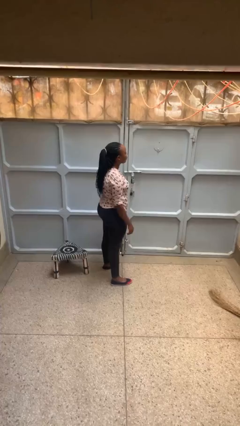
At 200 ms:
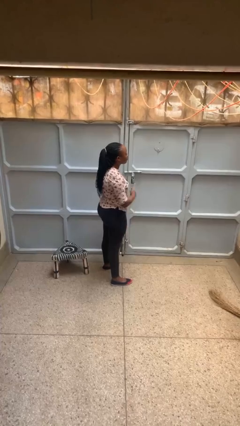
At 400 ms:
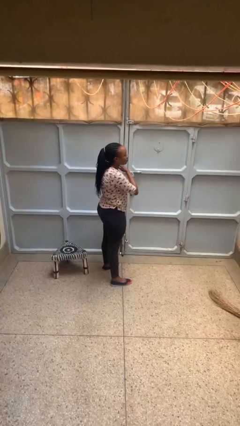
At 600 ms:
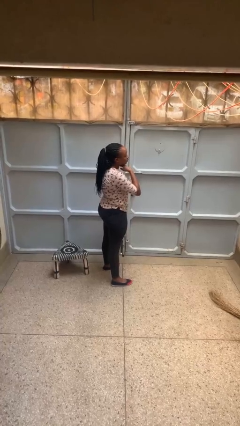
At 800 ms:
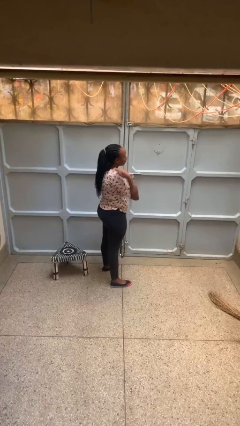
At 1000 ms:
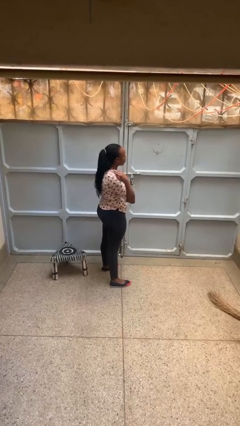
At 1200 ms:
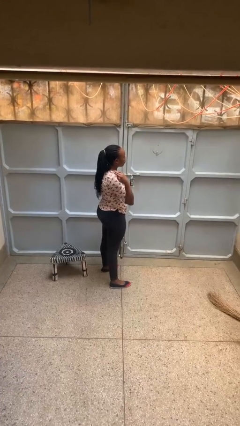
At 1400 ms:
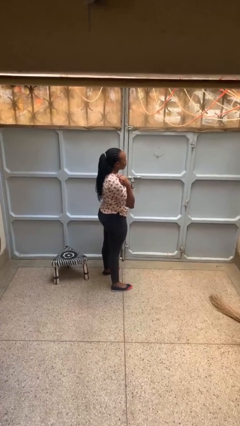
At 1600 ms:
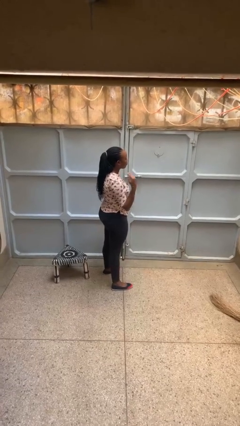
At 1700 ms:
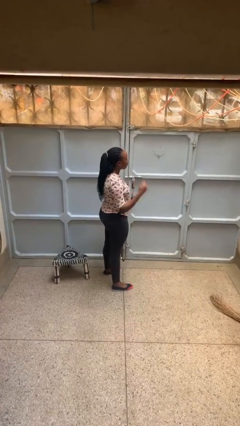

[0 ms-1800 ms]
person gestures cut

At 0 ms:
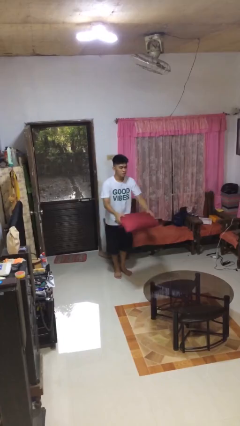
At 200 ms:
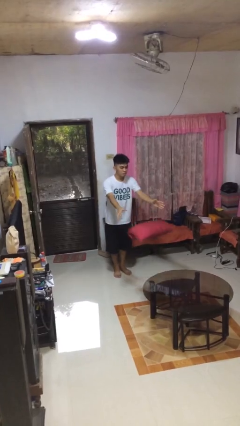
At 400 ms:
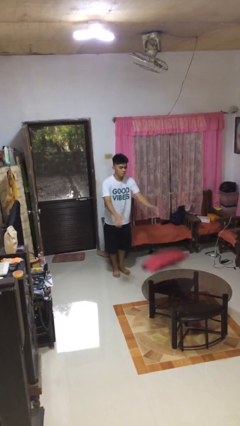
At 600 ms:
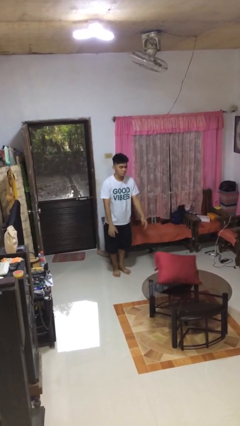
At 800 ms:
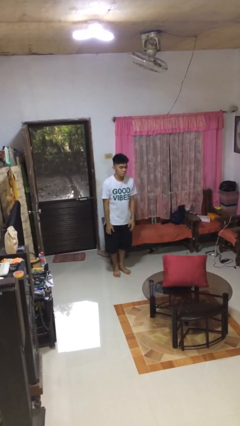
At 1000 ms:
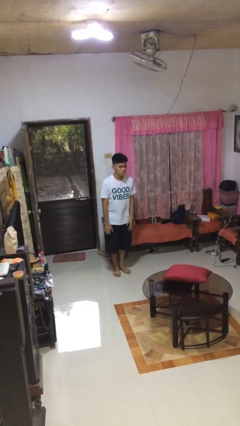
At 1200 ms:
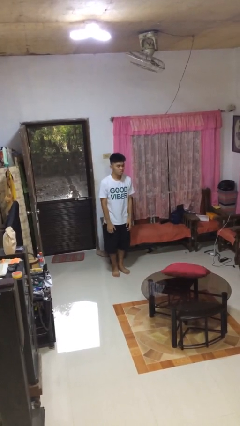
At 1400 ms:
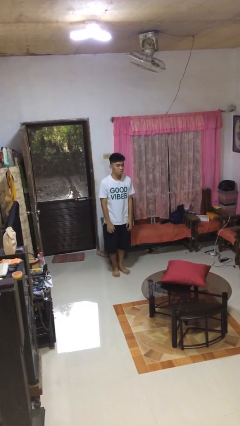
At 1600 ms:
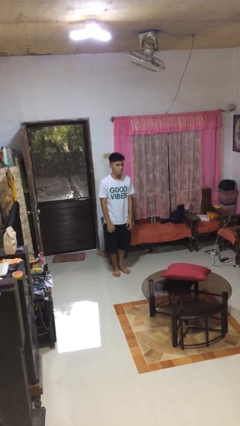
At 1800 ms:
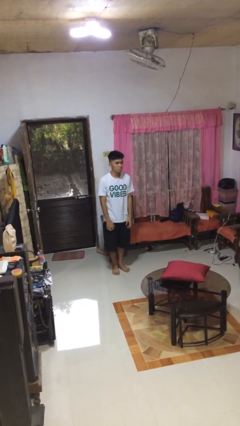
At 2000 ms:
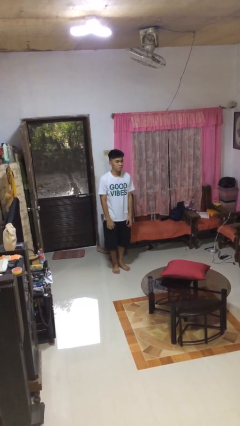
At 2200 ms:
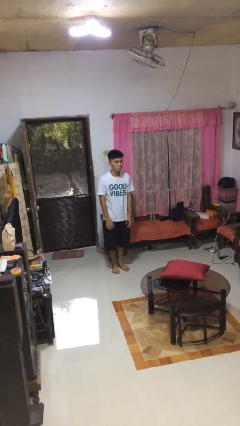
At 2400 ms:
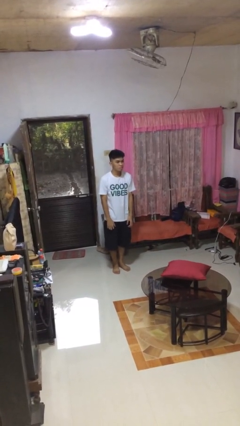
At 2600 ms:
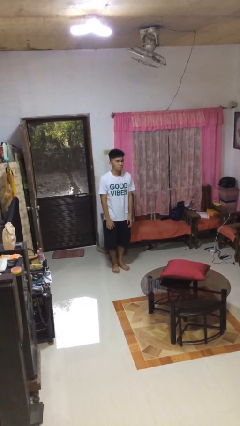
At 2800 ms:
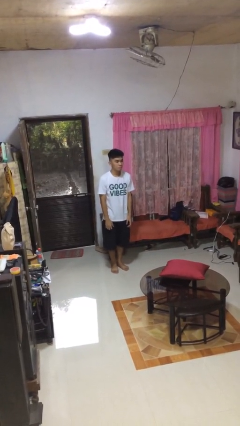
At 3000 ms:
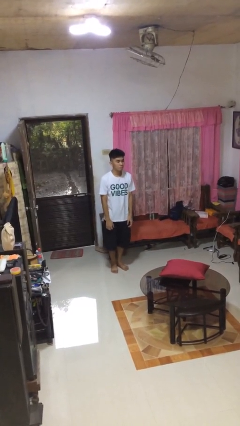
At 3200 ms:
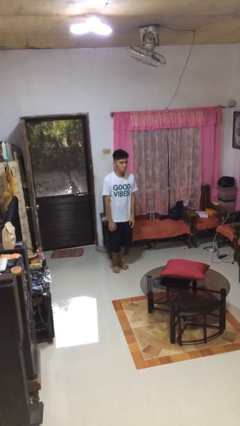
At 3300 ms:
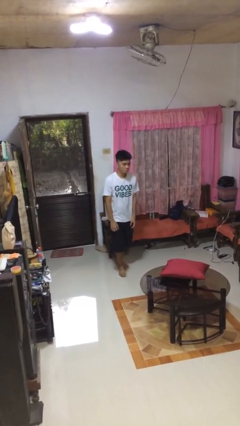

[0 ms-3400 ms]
person throws object on table

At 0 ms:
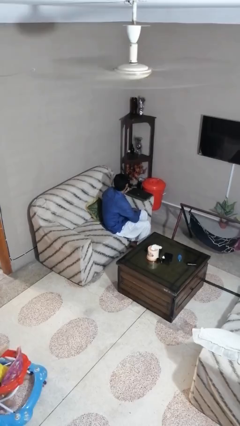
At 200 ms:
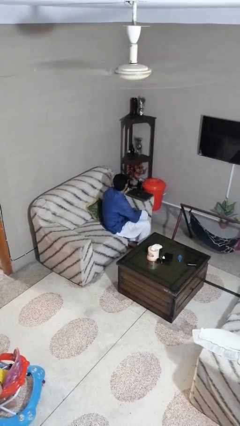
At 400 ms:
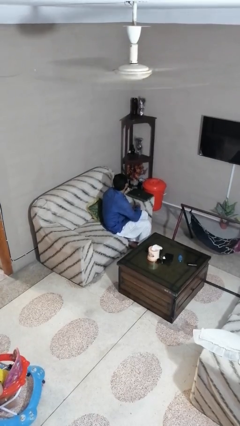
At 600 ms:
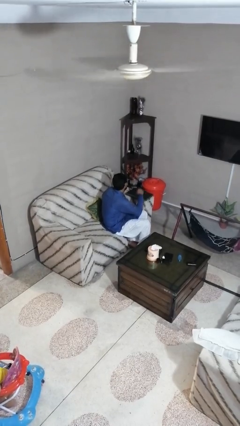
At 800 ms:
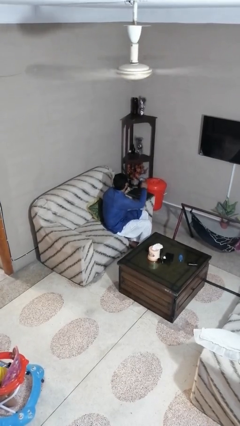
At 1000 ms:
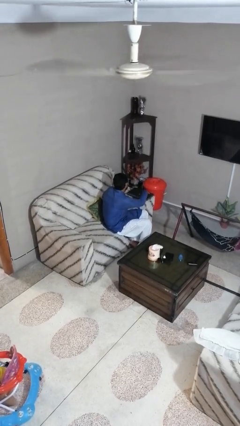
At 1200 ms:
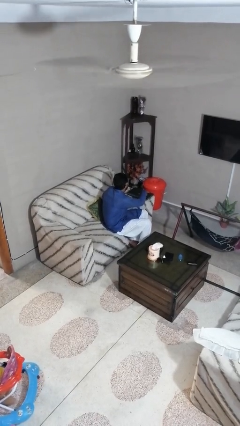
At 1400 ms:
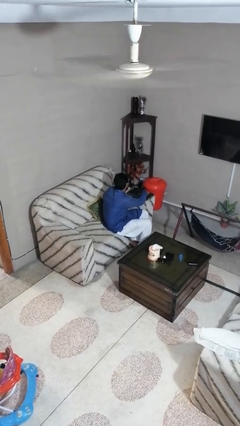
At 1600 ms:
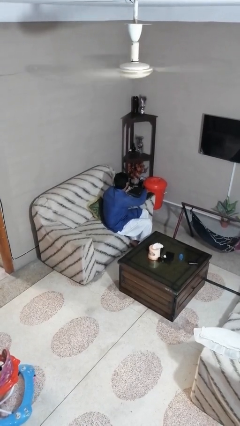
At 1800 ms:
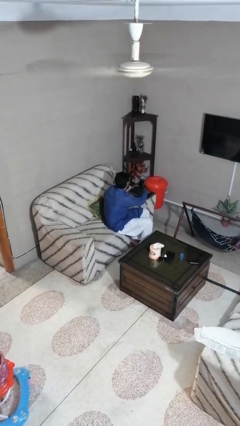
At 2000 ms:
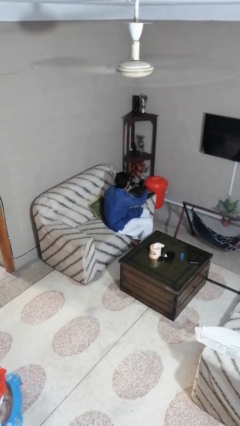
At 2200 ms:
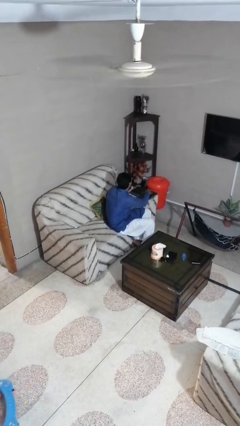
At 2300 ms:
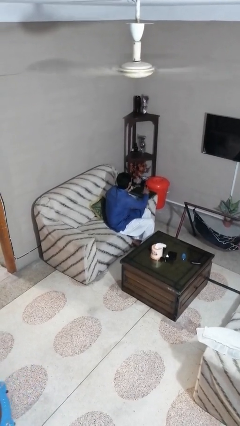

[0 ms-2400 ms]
person taps object with finger

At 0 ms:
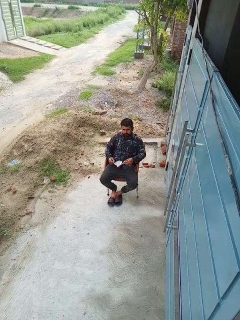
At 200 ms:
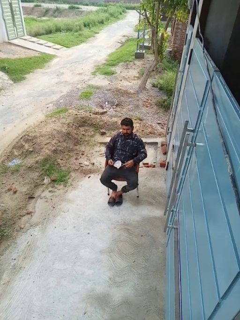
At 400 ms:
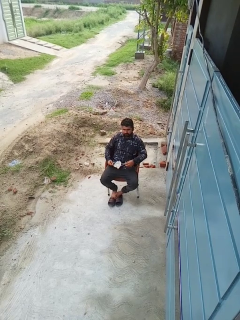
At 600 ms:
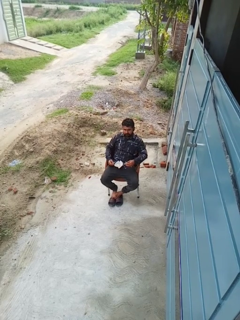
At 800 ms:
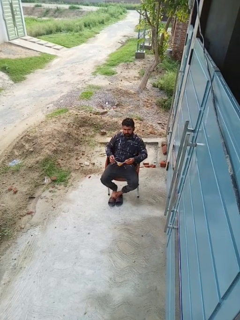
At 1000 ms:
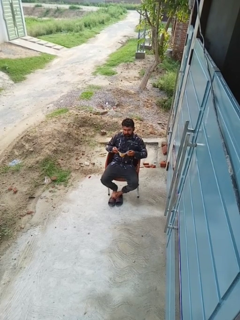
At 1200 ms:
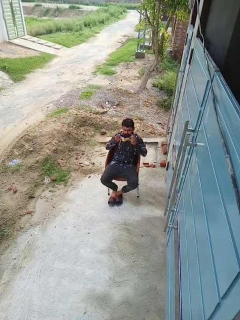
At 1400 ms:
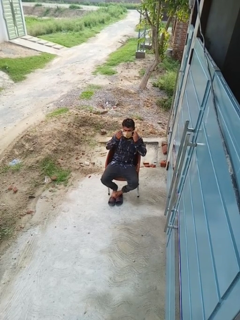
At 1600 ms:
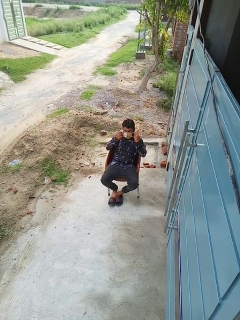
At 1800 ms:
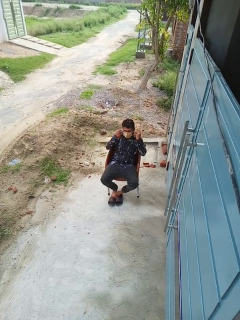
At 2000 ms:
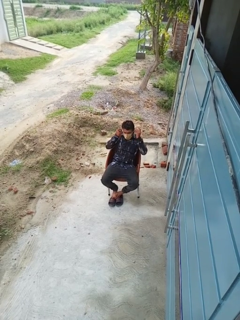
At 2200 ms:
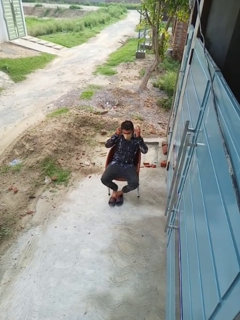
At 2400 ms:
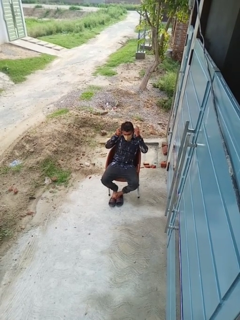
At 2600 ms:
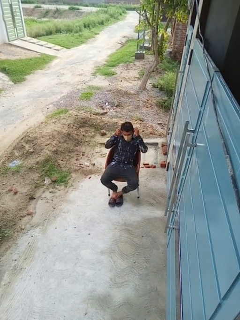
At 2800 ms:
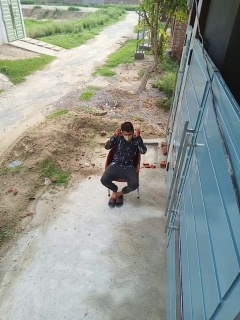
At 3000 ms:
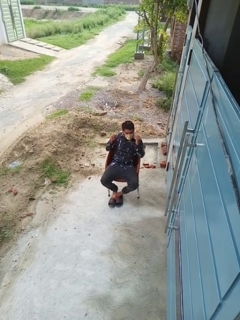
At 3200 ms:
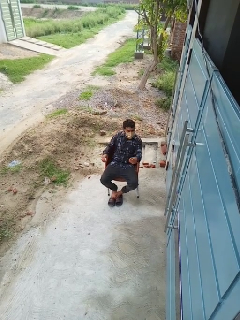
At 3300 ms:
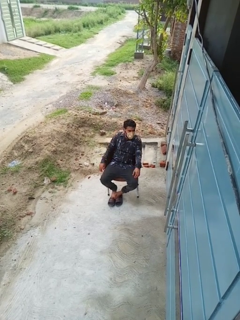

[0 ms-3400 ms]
person puts on facemask

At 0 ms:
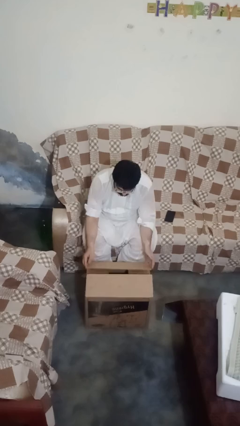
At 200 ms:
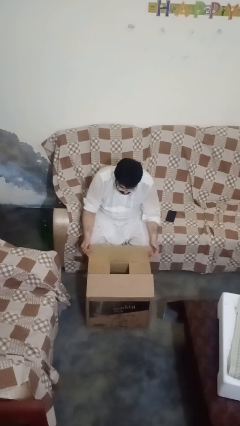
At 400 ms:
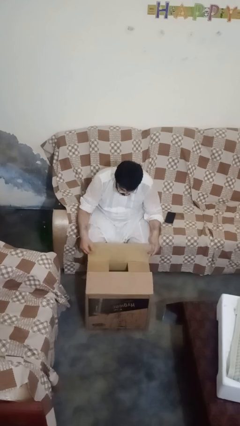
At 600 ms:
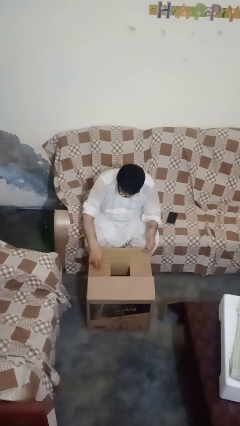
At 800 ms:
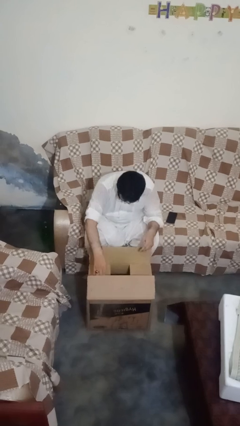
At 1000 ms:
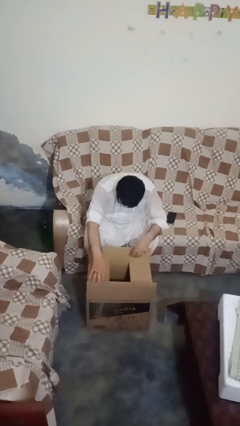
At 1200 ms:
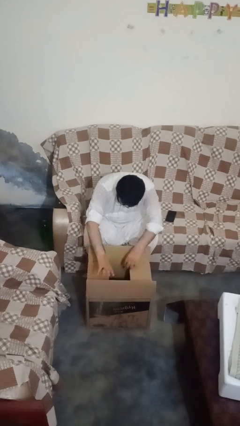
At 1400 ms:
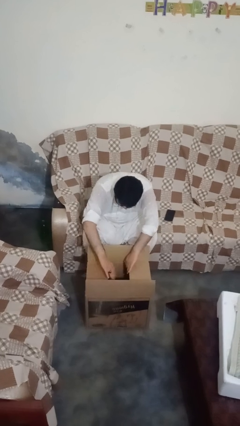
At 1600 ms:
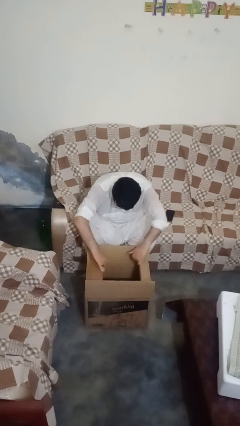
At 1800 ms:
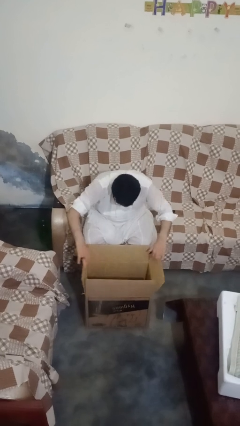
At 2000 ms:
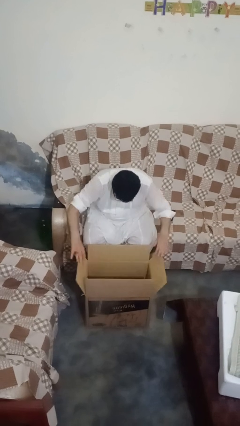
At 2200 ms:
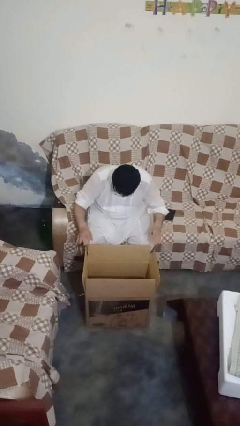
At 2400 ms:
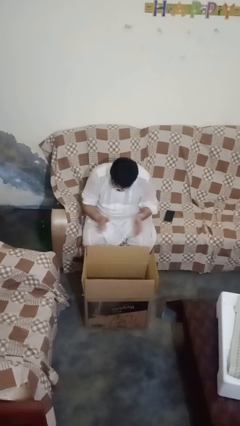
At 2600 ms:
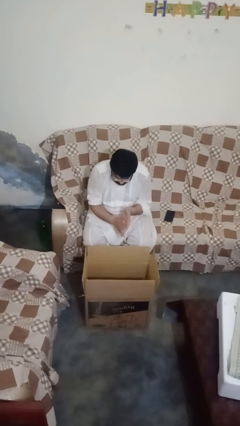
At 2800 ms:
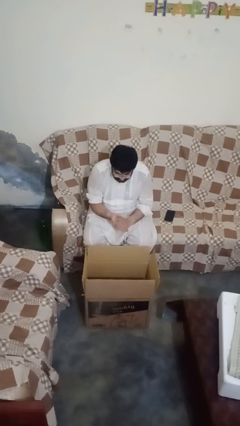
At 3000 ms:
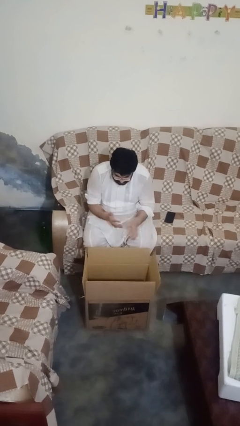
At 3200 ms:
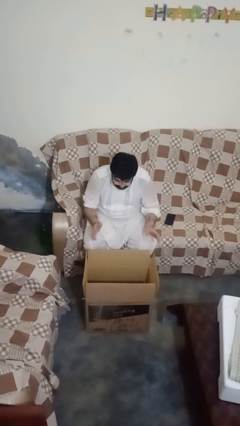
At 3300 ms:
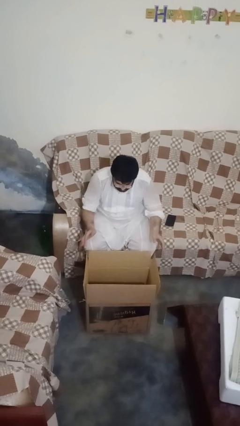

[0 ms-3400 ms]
person opens box

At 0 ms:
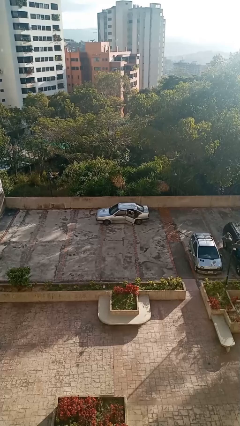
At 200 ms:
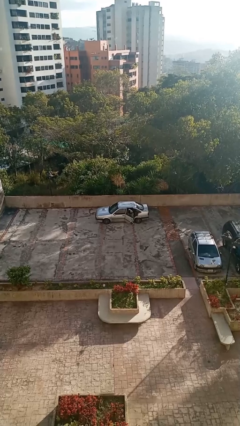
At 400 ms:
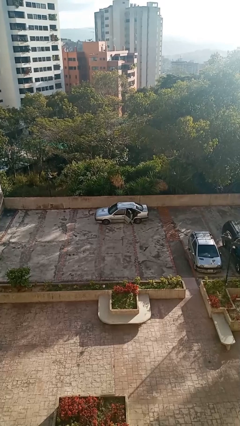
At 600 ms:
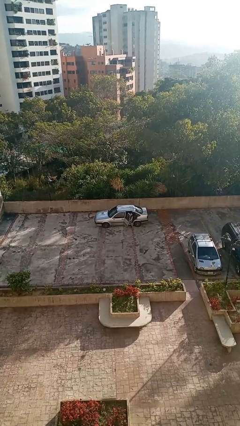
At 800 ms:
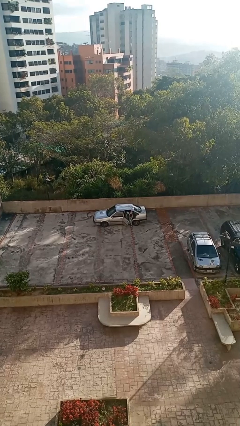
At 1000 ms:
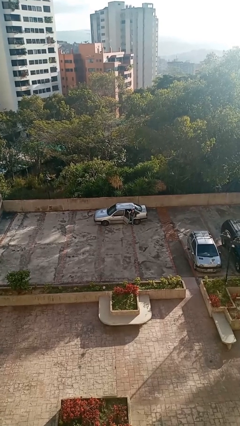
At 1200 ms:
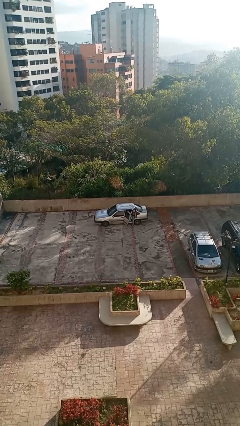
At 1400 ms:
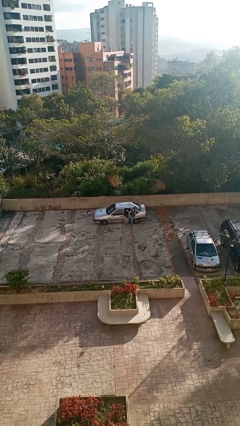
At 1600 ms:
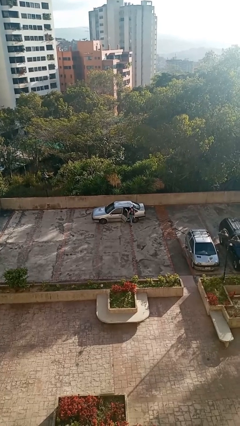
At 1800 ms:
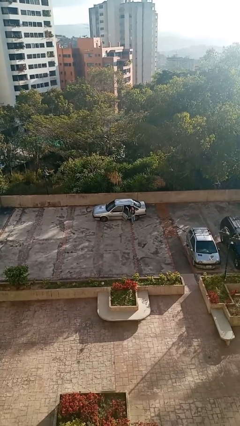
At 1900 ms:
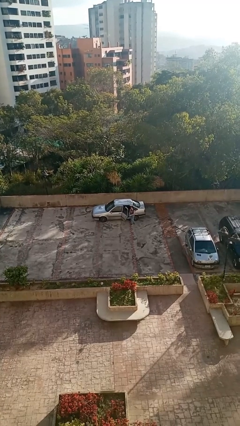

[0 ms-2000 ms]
car drops off person

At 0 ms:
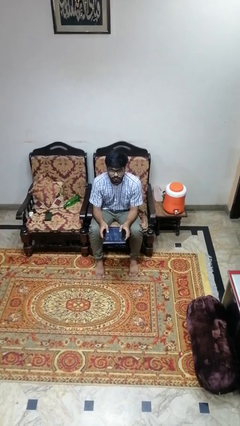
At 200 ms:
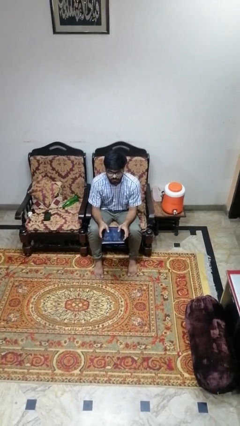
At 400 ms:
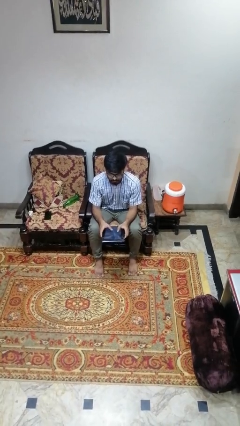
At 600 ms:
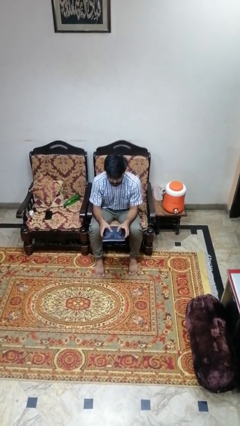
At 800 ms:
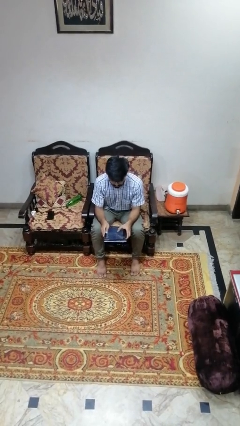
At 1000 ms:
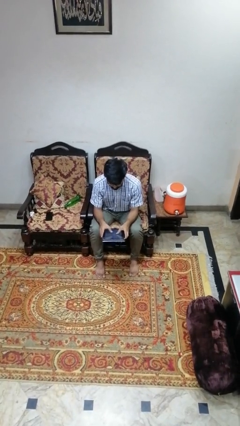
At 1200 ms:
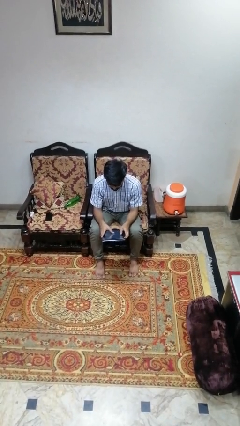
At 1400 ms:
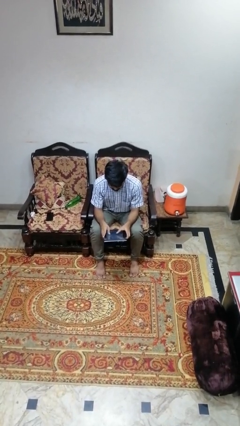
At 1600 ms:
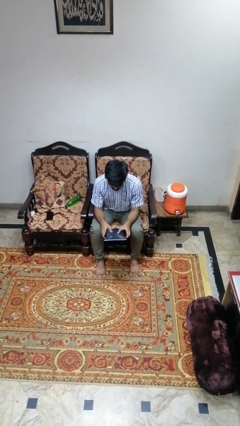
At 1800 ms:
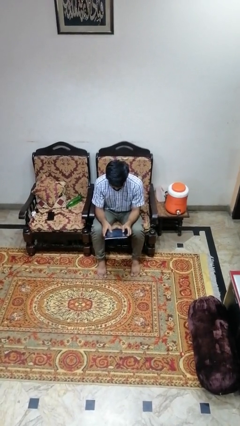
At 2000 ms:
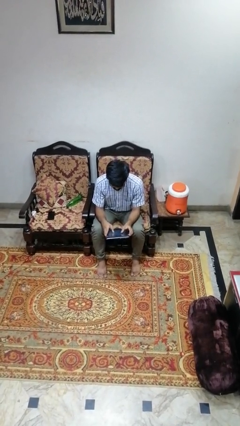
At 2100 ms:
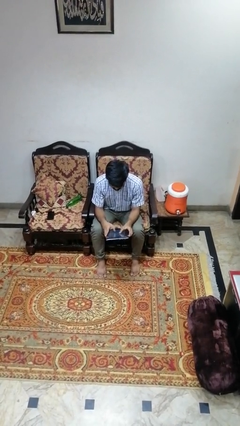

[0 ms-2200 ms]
person interacts with tablet
